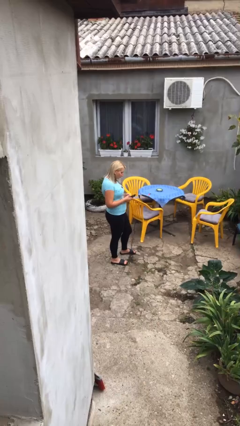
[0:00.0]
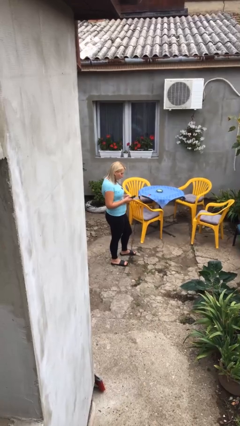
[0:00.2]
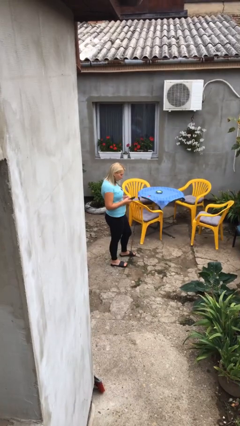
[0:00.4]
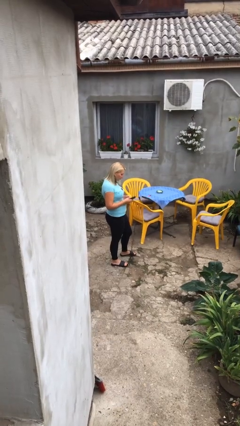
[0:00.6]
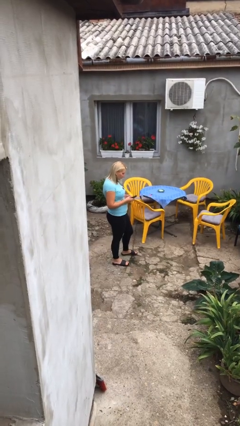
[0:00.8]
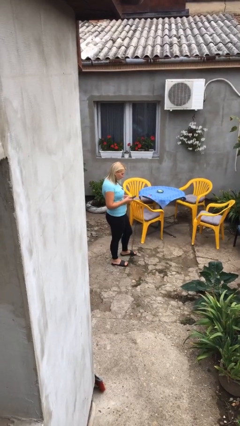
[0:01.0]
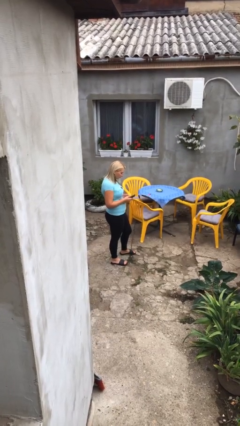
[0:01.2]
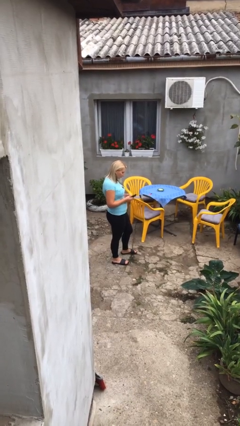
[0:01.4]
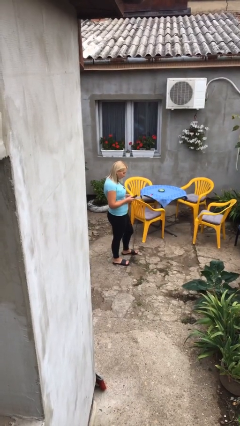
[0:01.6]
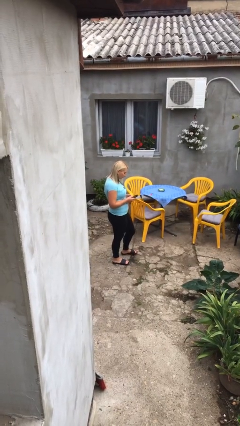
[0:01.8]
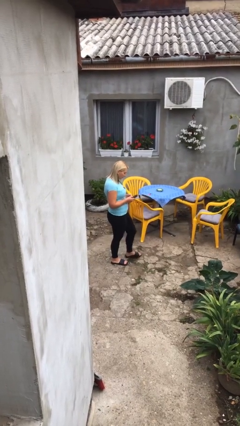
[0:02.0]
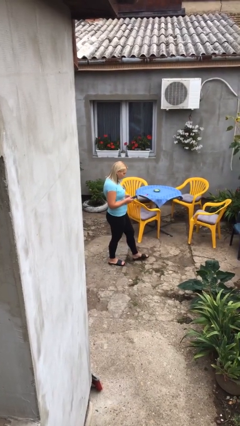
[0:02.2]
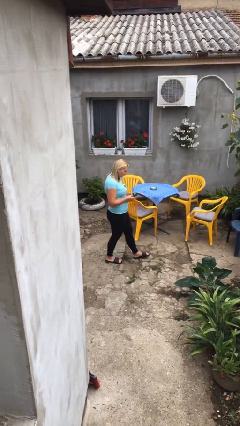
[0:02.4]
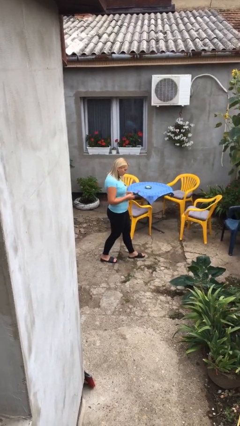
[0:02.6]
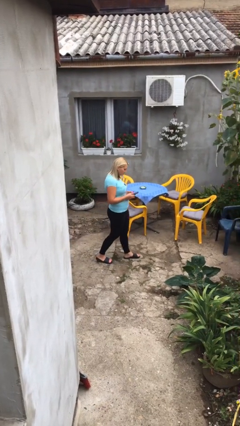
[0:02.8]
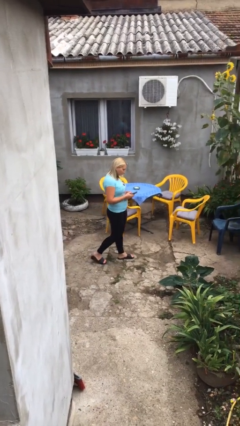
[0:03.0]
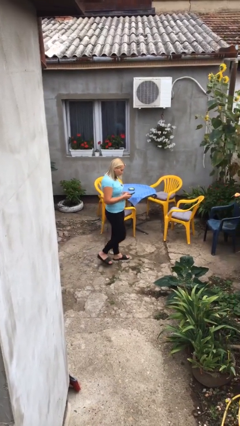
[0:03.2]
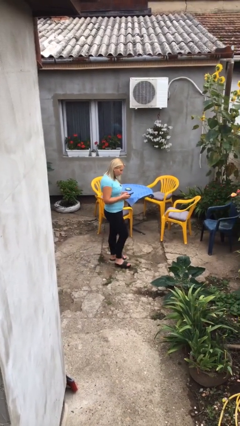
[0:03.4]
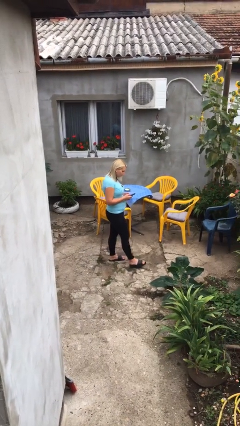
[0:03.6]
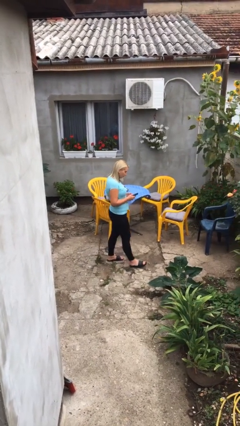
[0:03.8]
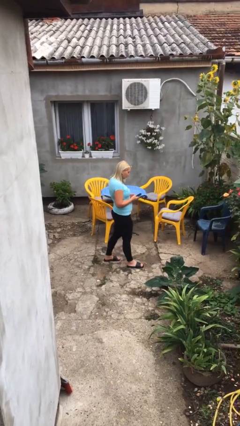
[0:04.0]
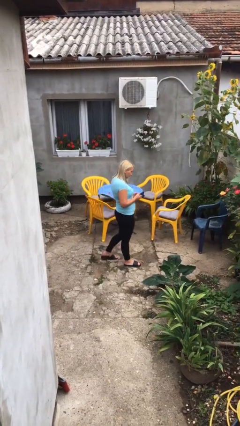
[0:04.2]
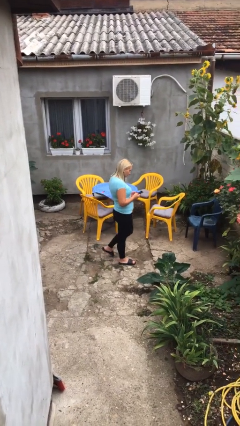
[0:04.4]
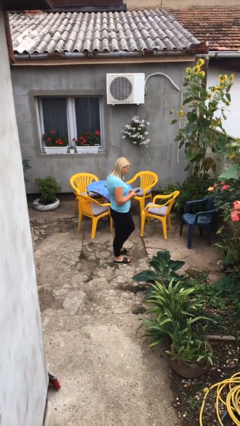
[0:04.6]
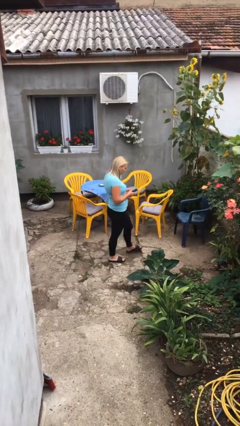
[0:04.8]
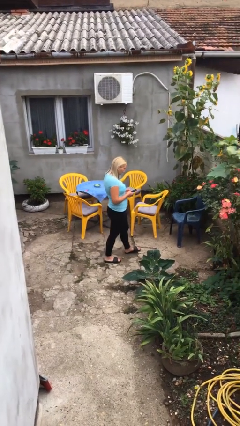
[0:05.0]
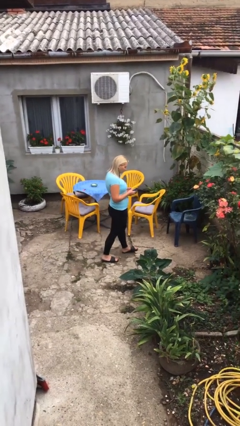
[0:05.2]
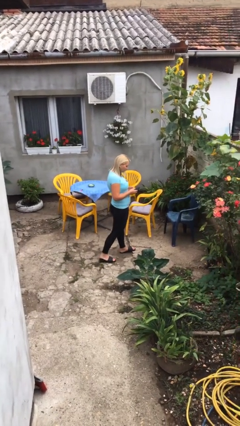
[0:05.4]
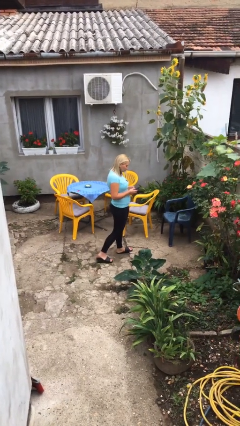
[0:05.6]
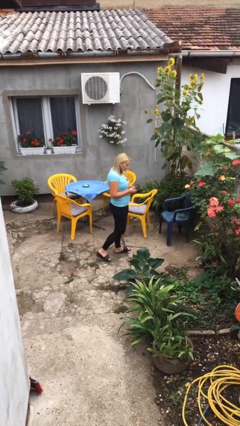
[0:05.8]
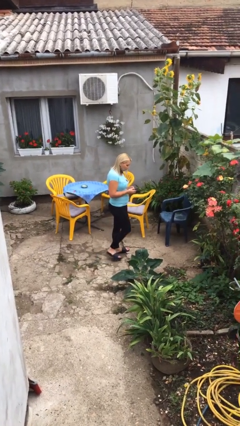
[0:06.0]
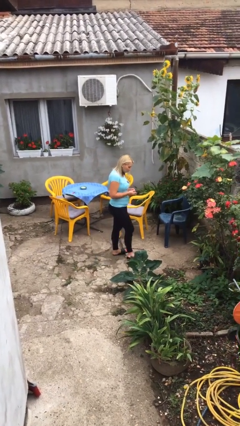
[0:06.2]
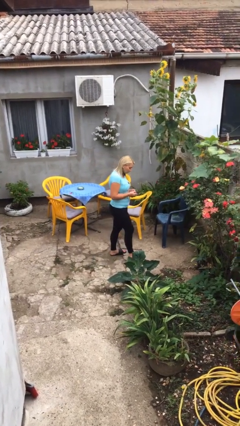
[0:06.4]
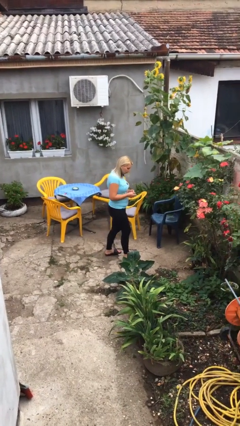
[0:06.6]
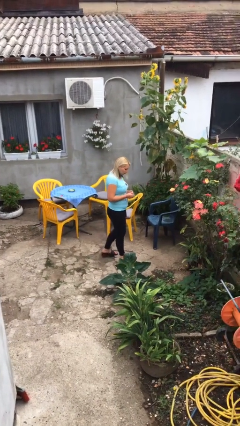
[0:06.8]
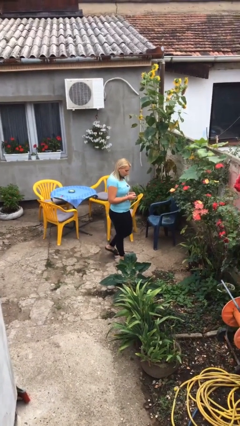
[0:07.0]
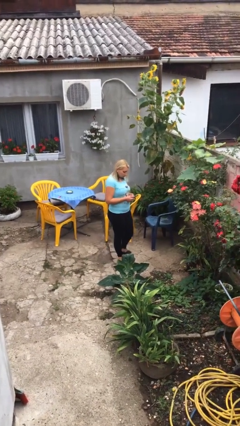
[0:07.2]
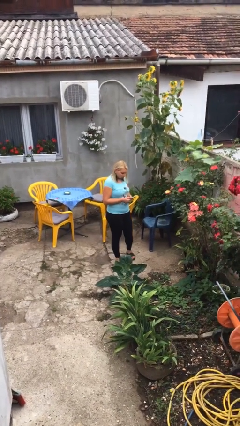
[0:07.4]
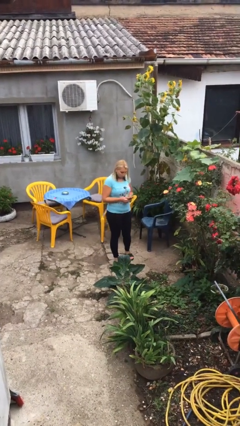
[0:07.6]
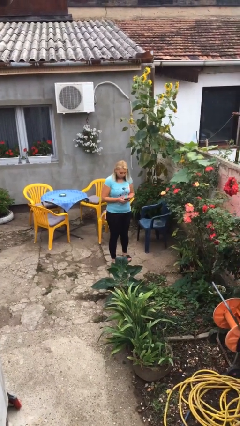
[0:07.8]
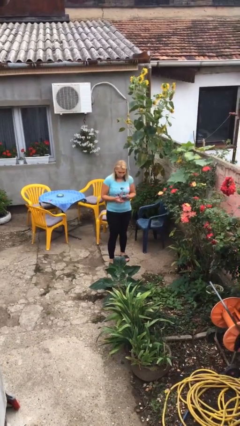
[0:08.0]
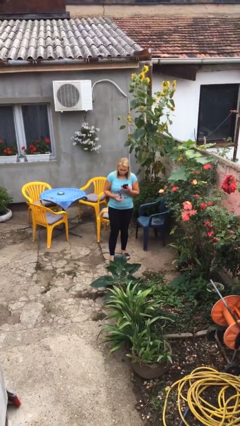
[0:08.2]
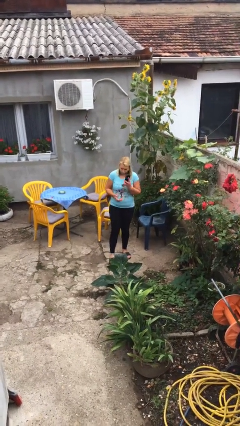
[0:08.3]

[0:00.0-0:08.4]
person texts on phone

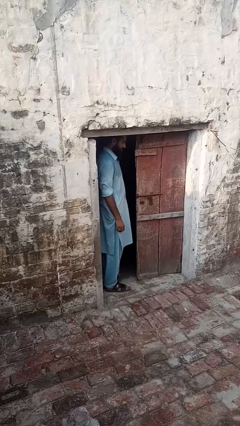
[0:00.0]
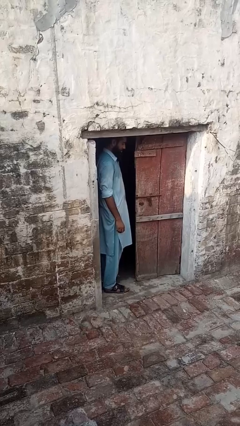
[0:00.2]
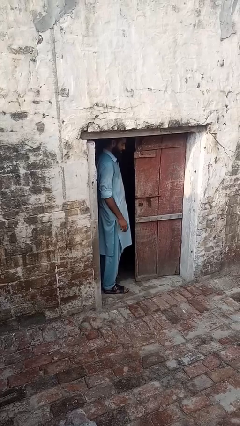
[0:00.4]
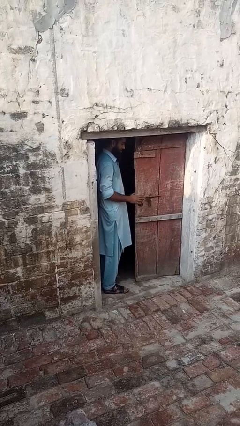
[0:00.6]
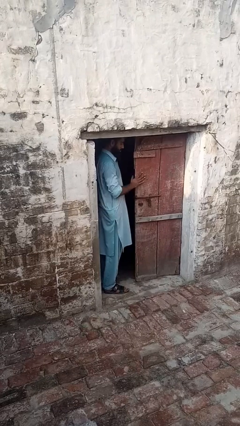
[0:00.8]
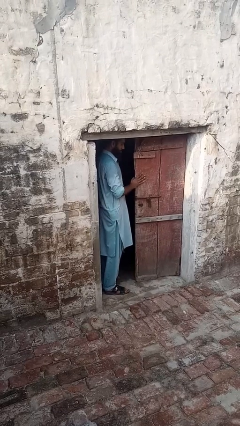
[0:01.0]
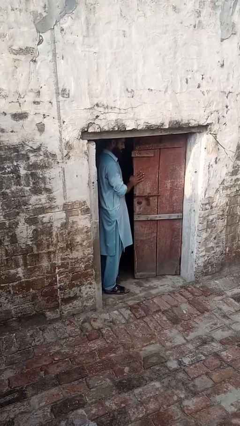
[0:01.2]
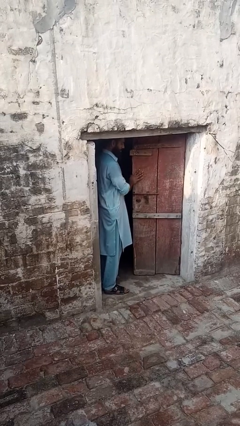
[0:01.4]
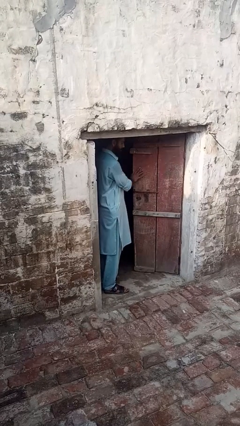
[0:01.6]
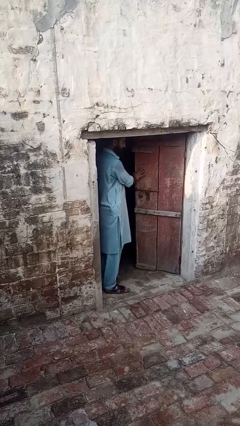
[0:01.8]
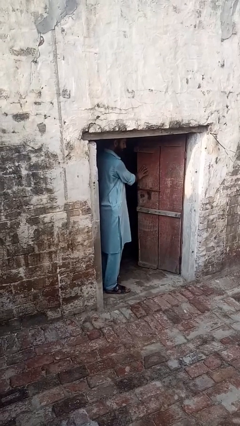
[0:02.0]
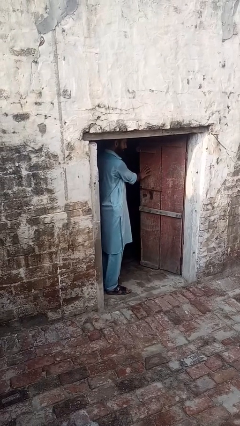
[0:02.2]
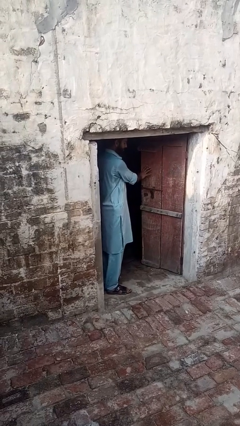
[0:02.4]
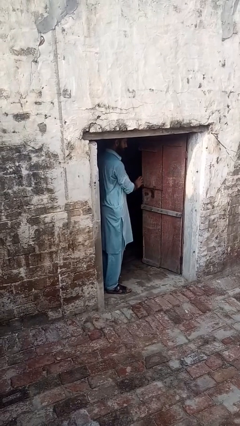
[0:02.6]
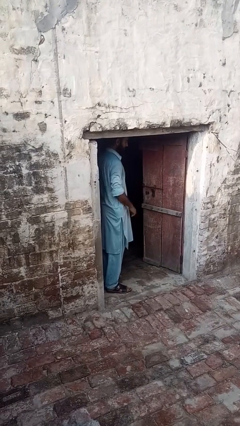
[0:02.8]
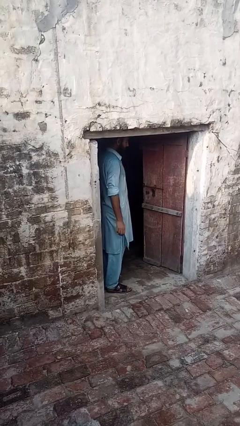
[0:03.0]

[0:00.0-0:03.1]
person opens facility door

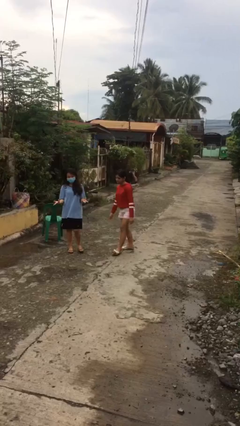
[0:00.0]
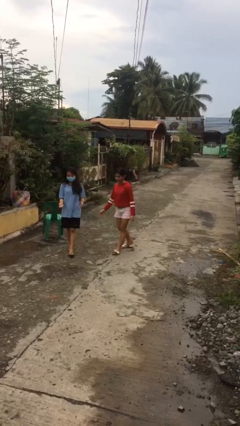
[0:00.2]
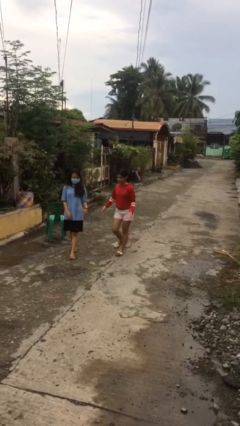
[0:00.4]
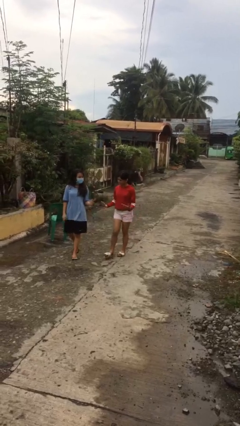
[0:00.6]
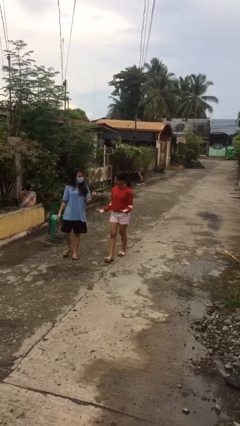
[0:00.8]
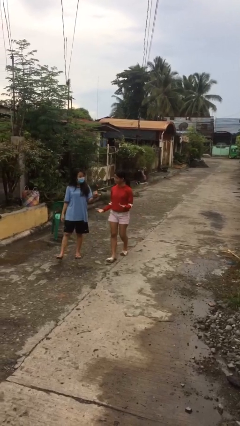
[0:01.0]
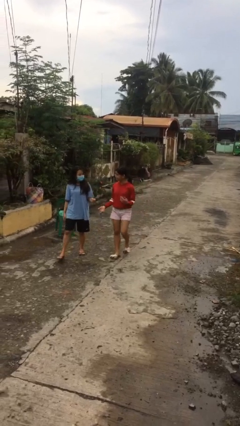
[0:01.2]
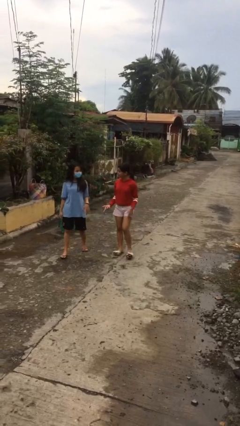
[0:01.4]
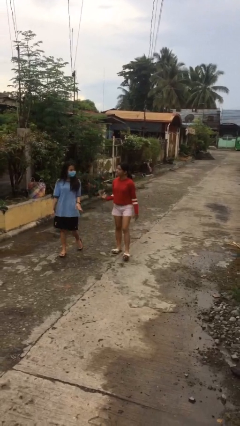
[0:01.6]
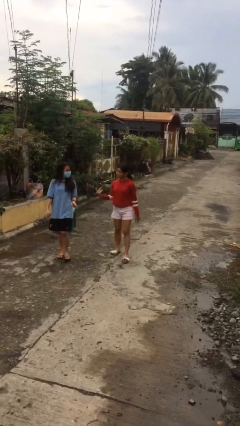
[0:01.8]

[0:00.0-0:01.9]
person talks to person

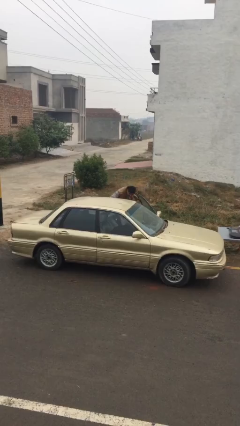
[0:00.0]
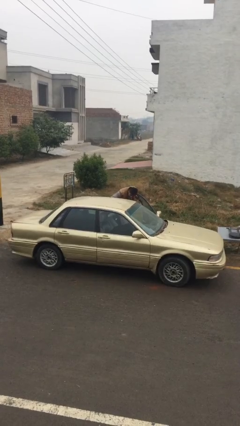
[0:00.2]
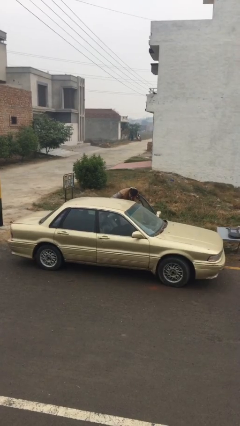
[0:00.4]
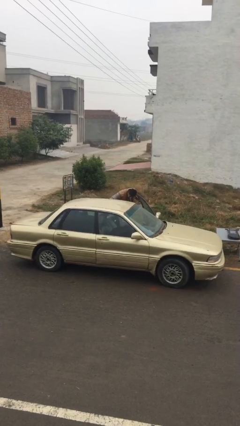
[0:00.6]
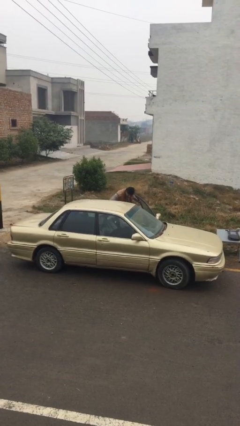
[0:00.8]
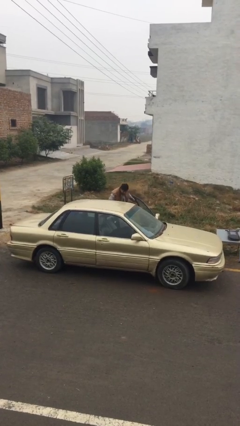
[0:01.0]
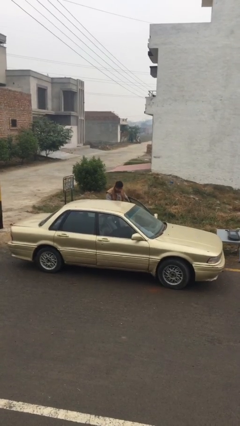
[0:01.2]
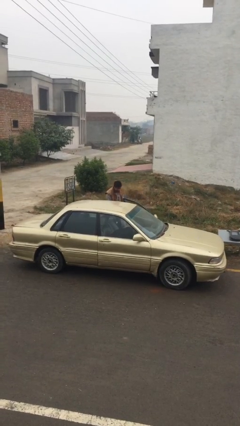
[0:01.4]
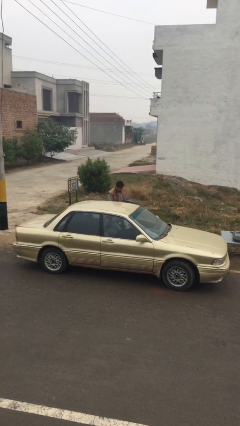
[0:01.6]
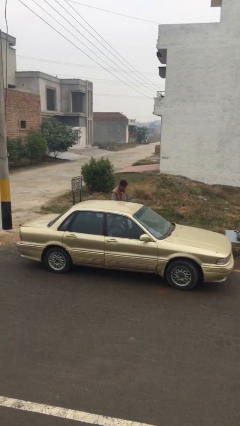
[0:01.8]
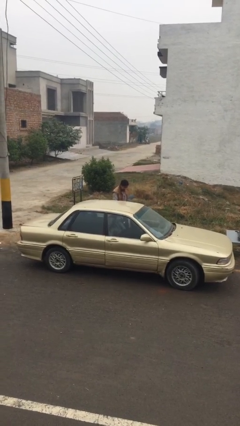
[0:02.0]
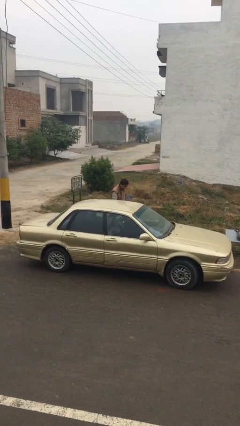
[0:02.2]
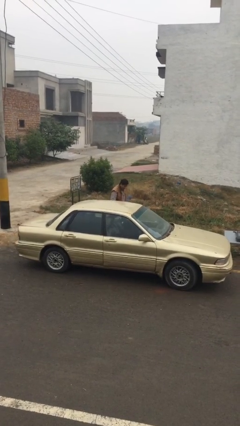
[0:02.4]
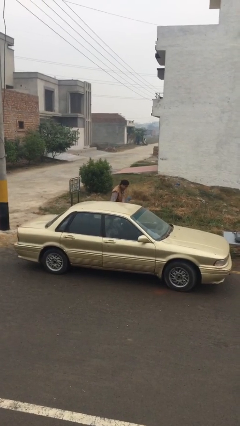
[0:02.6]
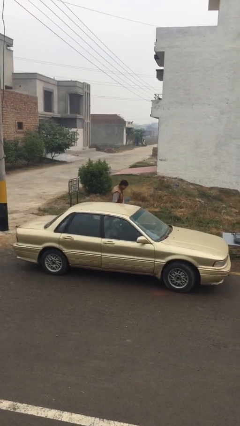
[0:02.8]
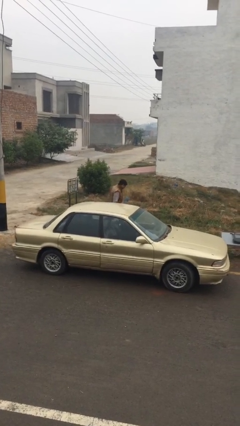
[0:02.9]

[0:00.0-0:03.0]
person closes car door

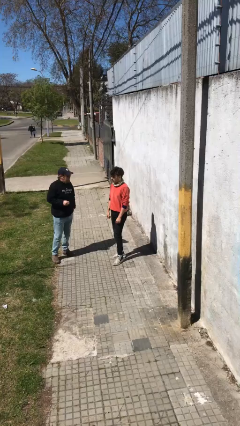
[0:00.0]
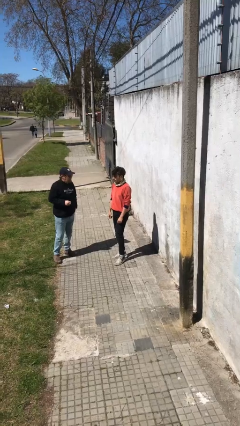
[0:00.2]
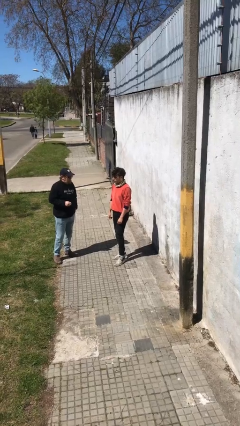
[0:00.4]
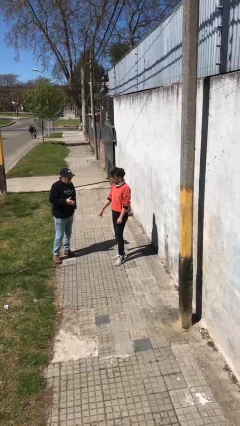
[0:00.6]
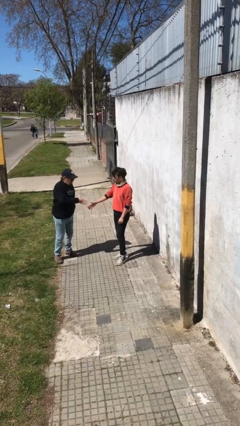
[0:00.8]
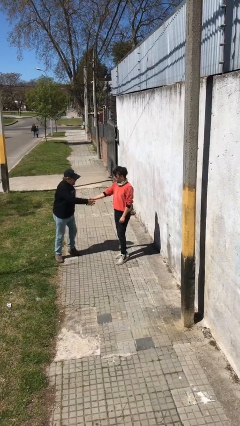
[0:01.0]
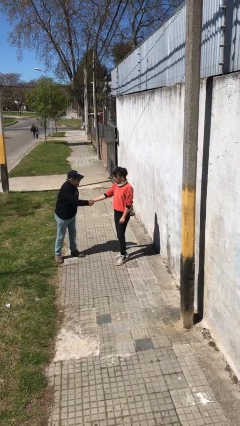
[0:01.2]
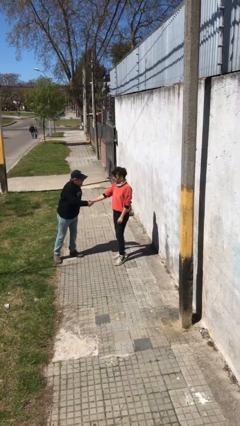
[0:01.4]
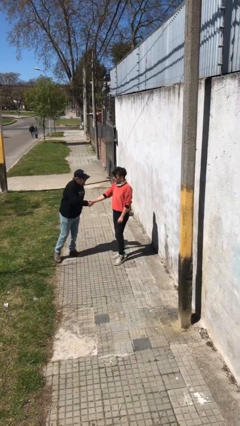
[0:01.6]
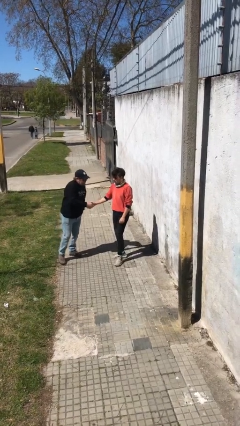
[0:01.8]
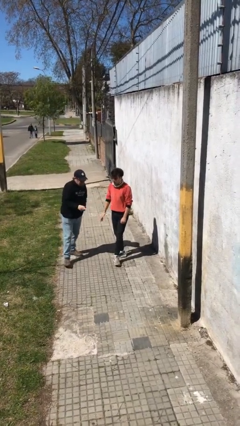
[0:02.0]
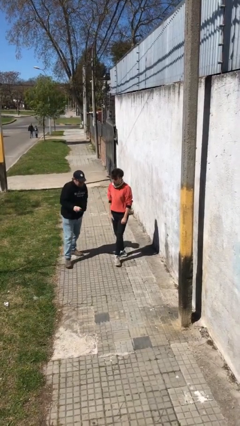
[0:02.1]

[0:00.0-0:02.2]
person shakes hand
